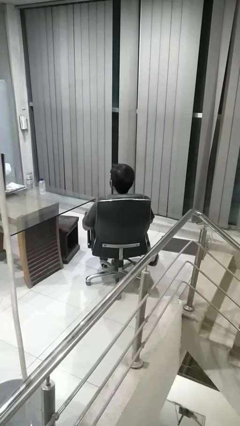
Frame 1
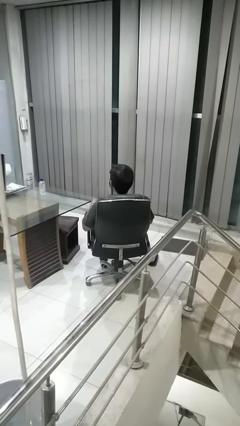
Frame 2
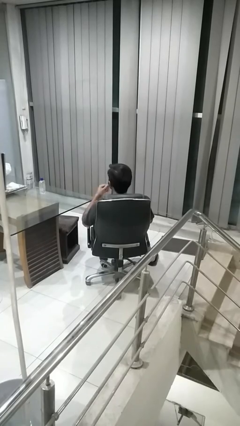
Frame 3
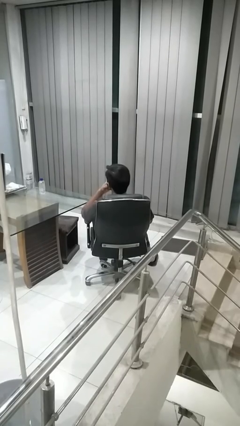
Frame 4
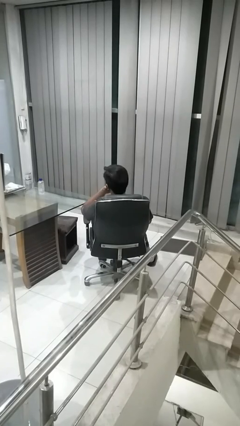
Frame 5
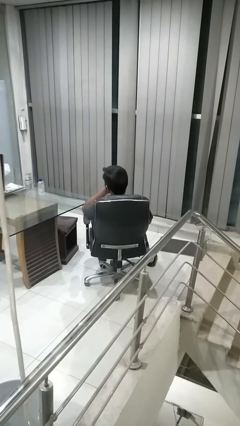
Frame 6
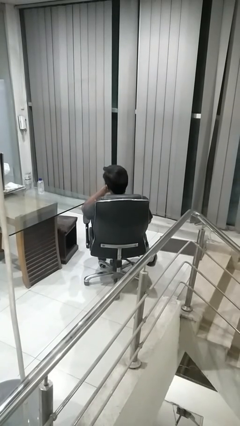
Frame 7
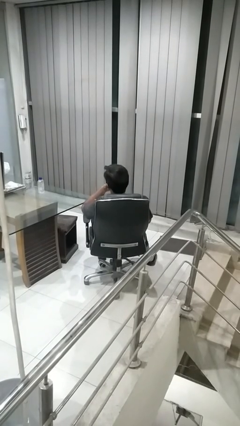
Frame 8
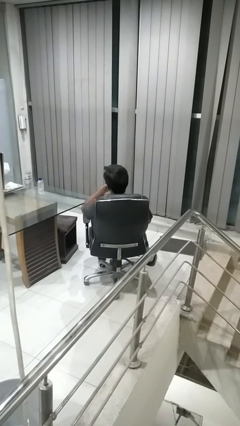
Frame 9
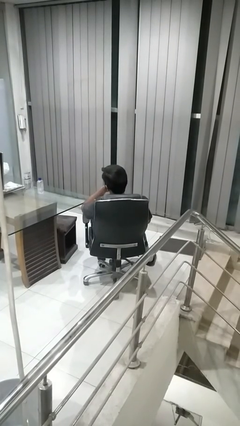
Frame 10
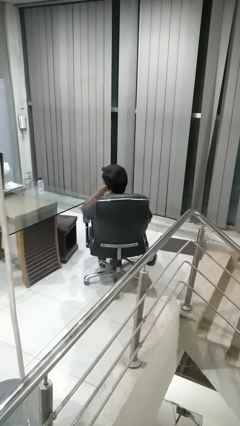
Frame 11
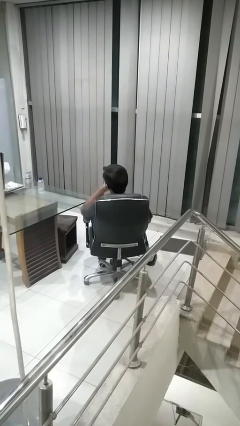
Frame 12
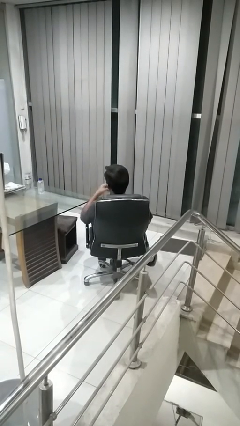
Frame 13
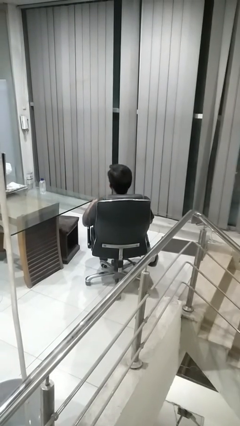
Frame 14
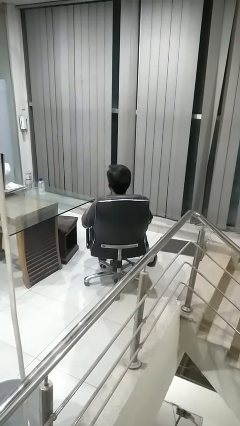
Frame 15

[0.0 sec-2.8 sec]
person strokes chin

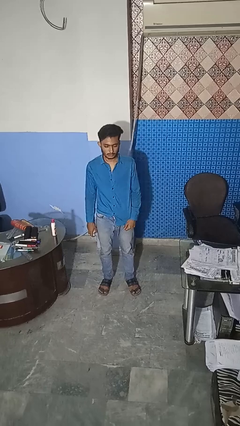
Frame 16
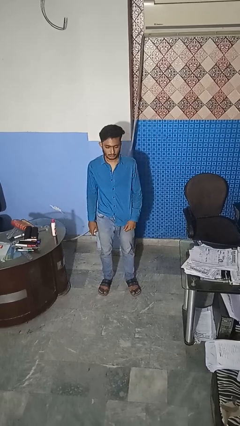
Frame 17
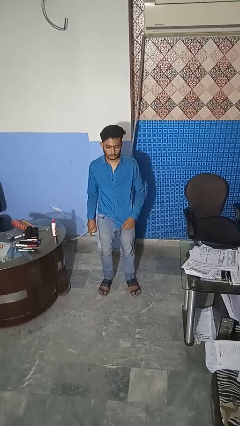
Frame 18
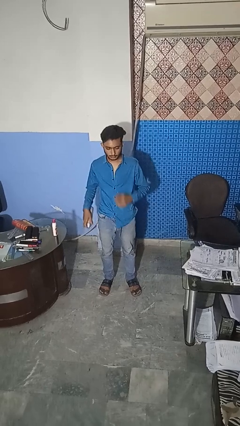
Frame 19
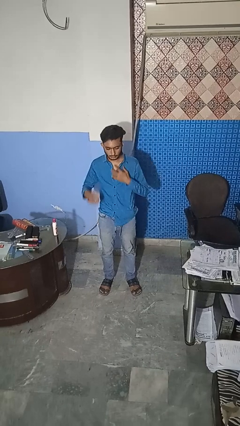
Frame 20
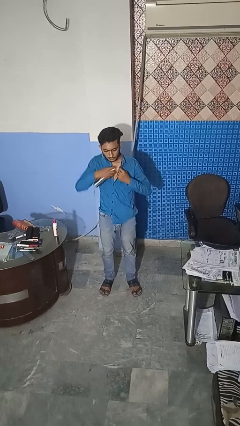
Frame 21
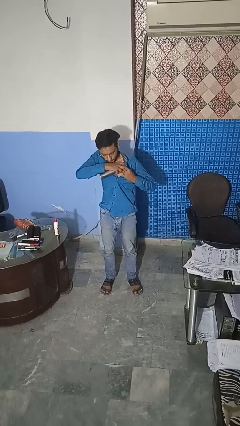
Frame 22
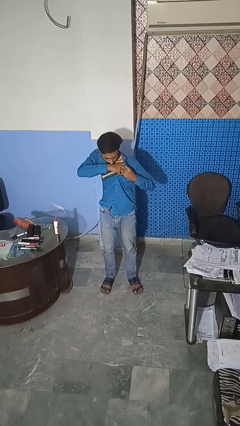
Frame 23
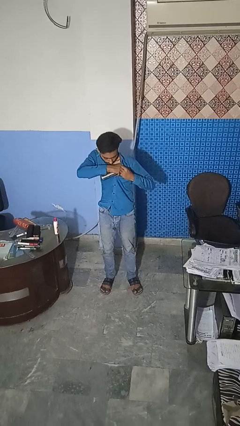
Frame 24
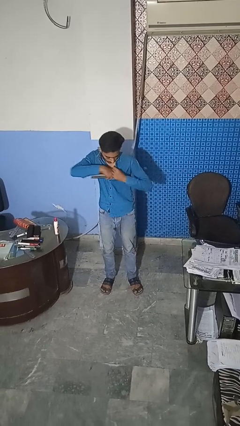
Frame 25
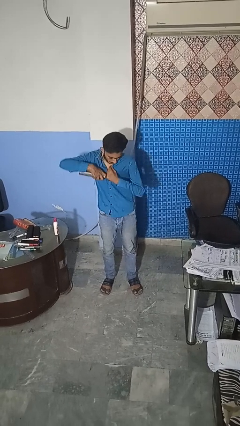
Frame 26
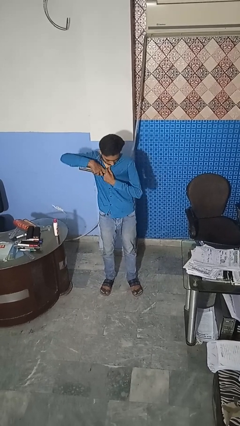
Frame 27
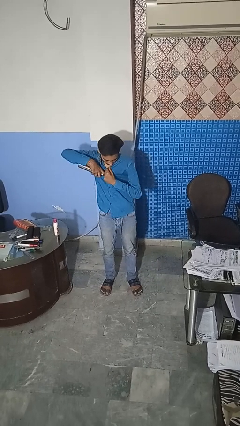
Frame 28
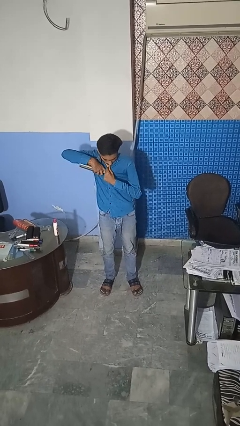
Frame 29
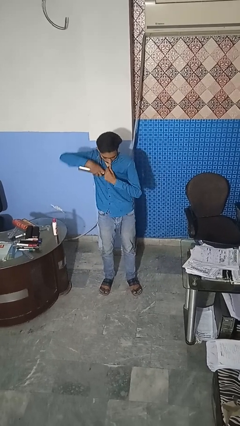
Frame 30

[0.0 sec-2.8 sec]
person applies deodorant

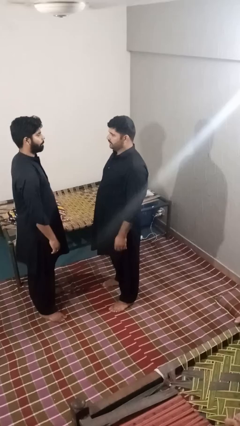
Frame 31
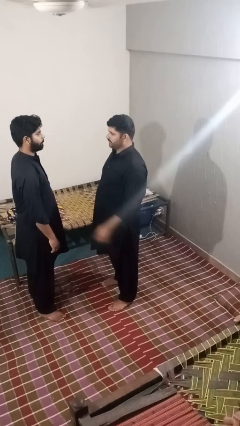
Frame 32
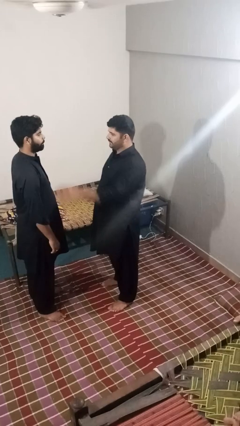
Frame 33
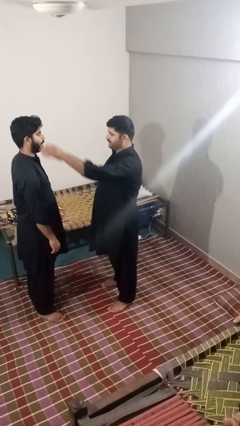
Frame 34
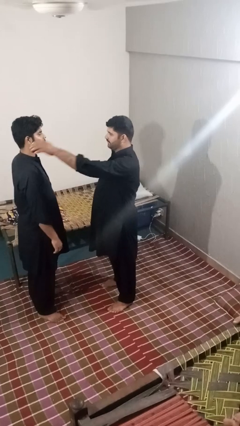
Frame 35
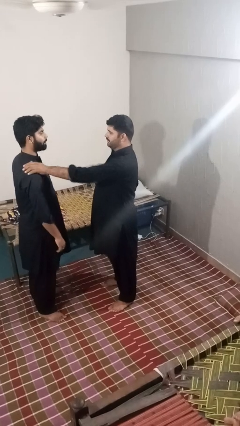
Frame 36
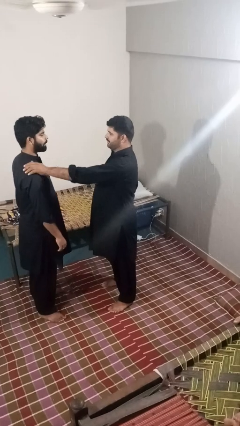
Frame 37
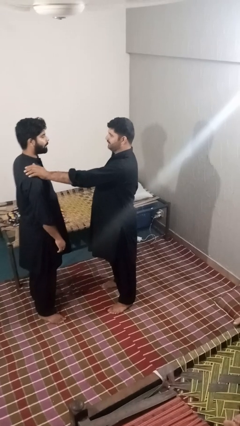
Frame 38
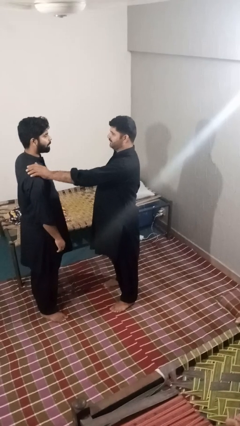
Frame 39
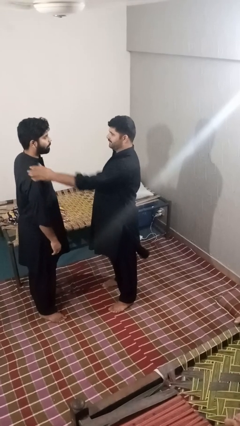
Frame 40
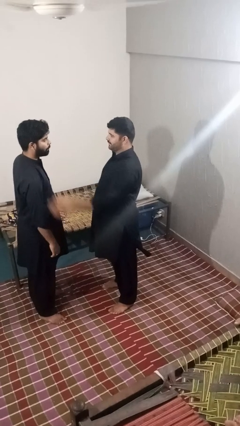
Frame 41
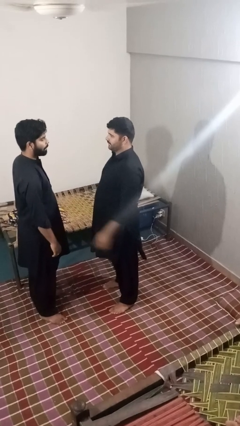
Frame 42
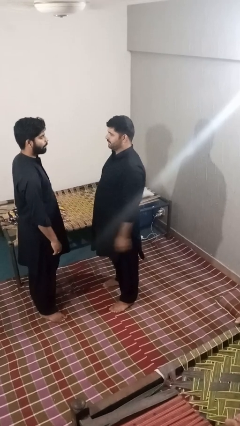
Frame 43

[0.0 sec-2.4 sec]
person pounds shoulders of person

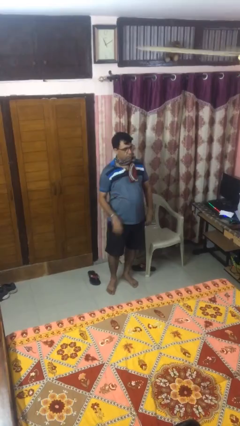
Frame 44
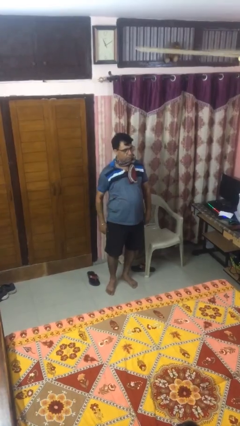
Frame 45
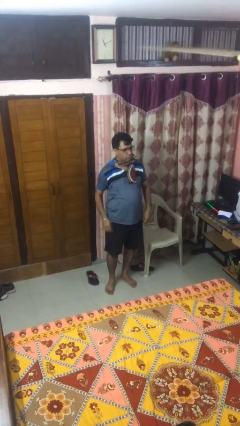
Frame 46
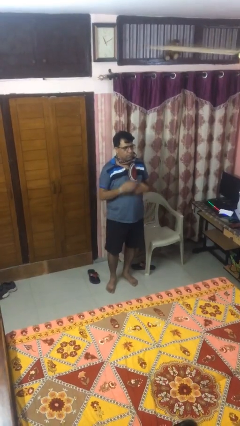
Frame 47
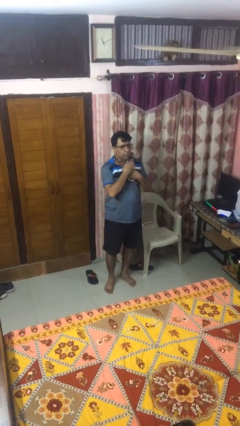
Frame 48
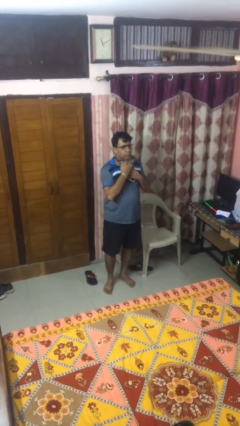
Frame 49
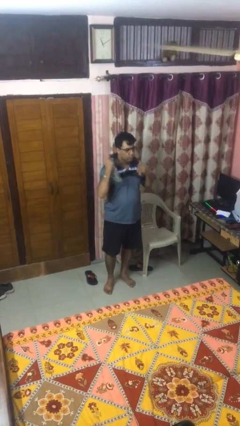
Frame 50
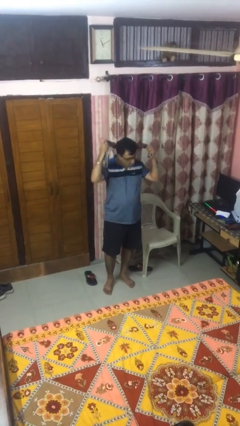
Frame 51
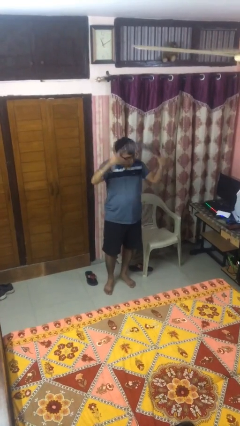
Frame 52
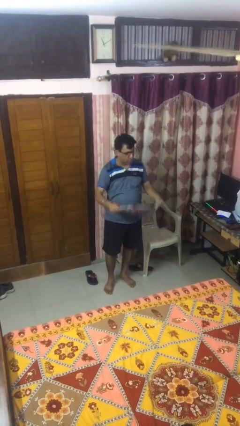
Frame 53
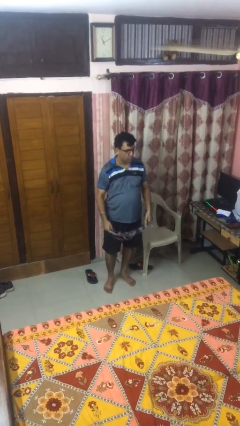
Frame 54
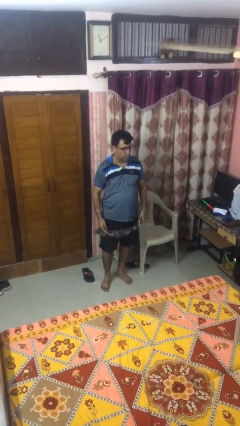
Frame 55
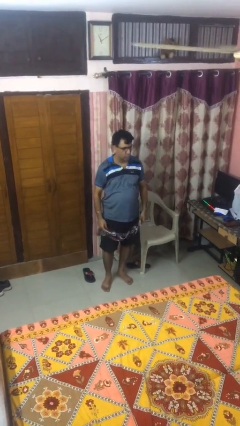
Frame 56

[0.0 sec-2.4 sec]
person takes off scarf

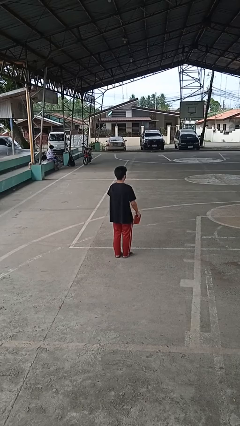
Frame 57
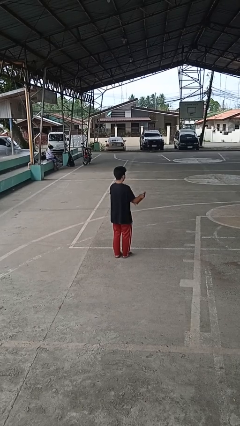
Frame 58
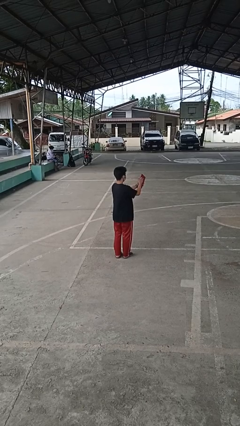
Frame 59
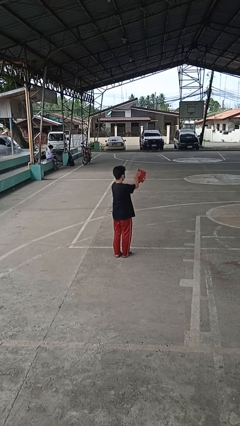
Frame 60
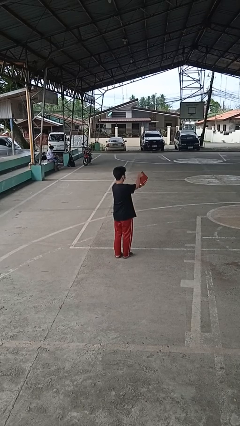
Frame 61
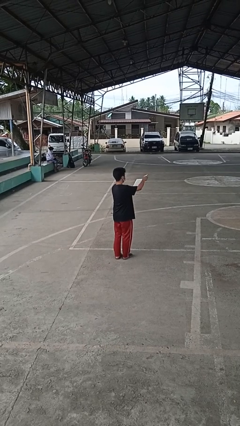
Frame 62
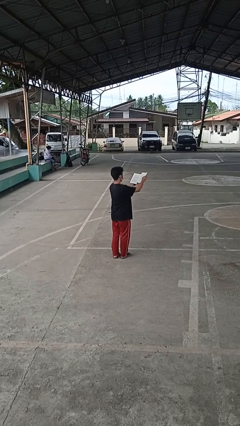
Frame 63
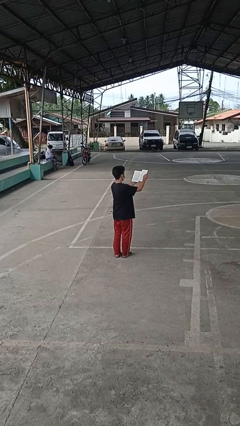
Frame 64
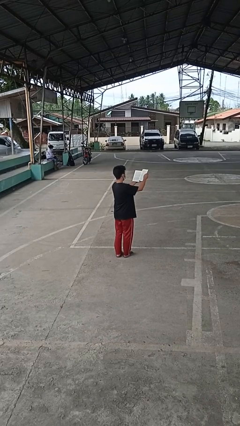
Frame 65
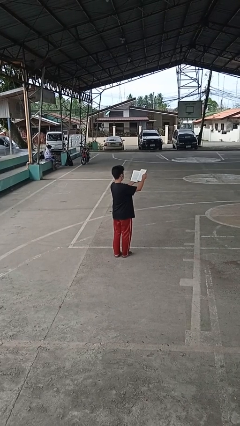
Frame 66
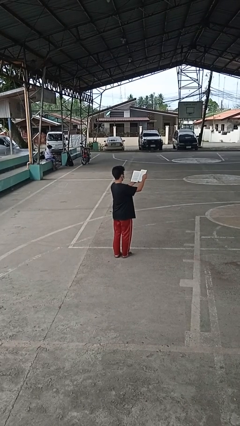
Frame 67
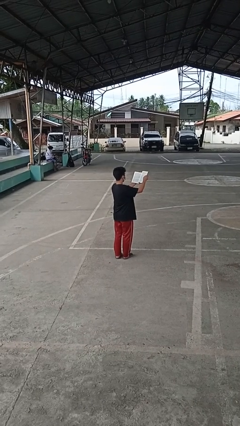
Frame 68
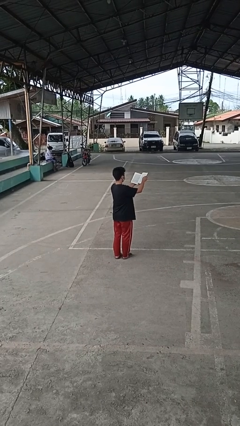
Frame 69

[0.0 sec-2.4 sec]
person reads book

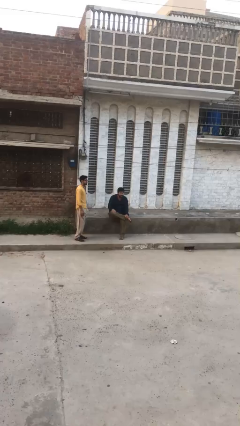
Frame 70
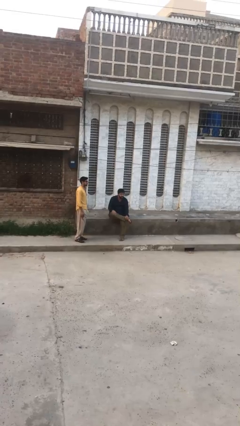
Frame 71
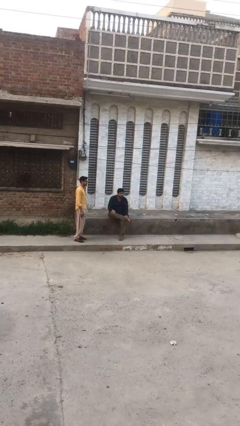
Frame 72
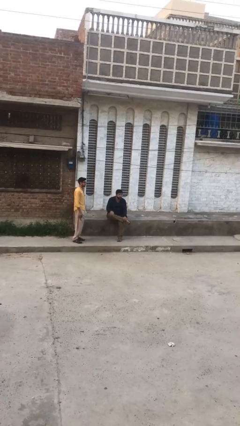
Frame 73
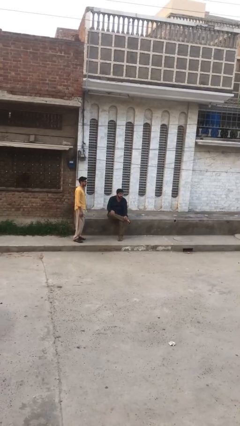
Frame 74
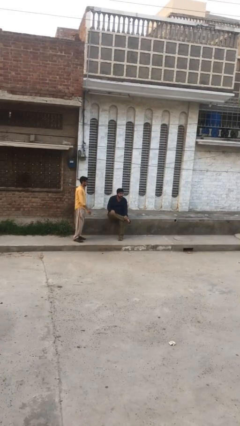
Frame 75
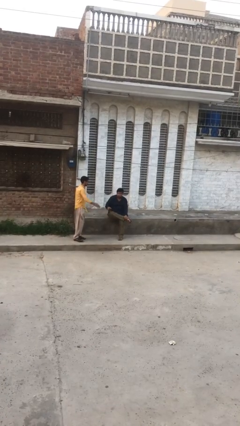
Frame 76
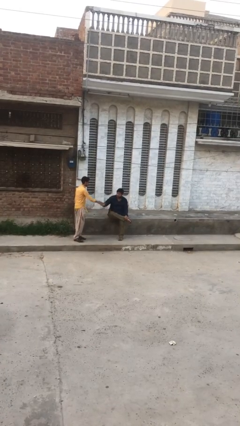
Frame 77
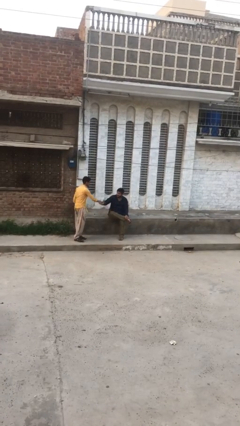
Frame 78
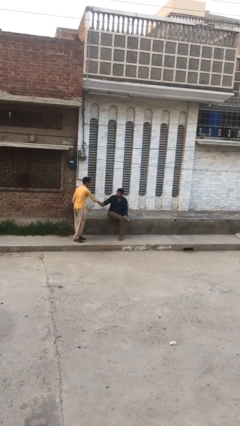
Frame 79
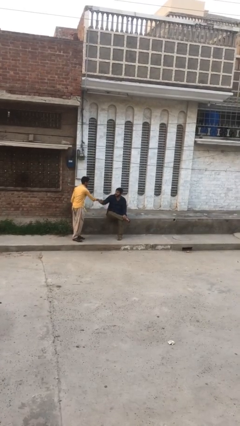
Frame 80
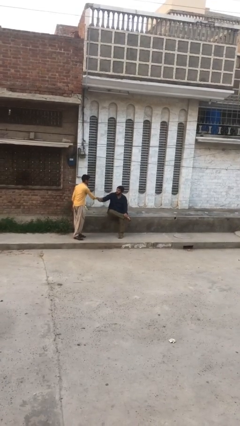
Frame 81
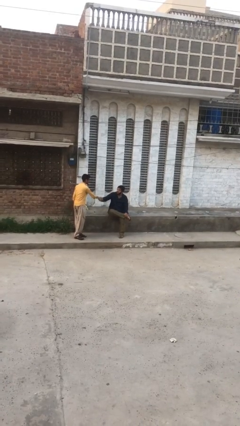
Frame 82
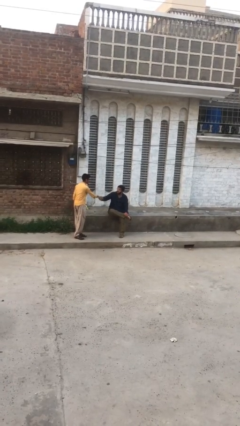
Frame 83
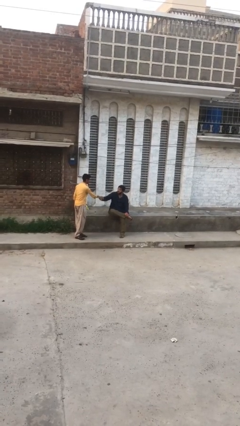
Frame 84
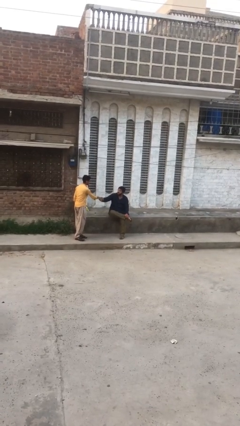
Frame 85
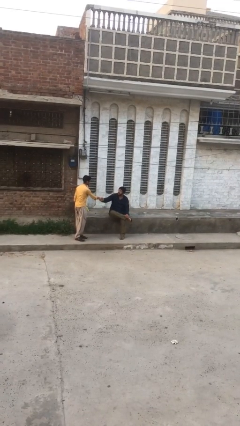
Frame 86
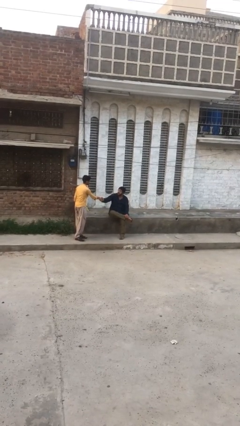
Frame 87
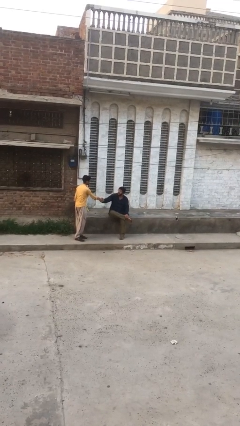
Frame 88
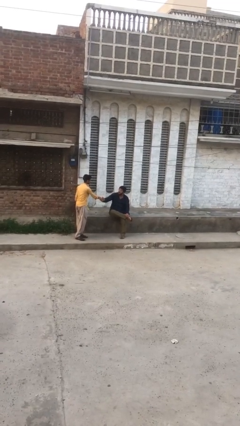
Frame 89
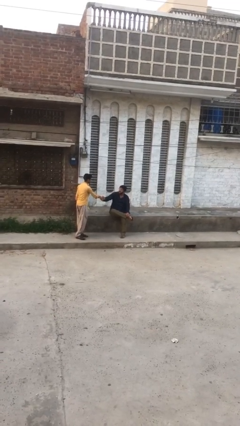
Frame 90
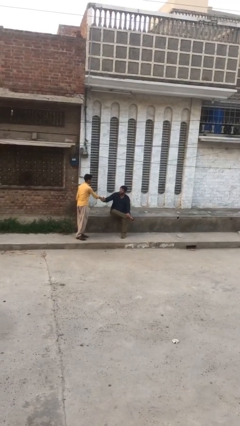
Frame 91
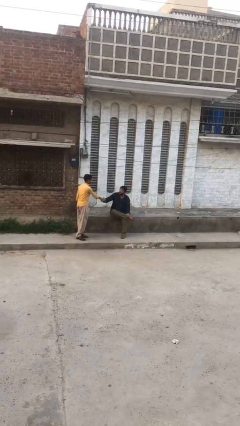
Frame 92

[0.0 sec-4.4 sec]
person shakes hand
